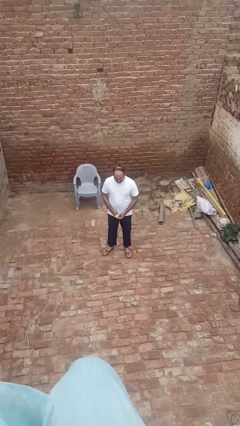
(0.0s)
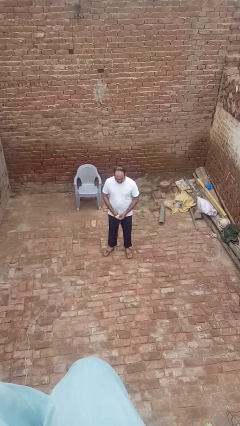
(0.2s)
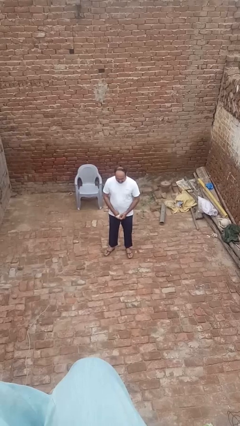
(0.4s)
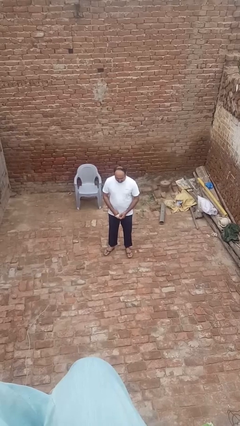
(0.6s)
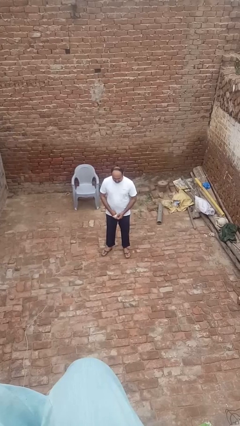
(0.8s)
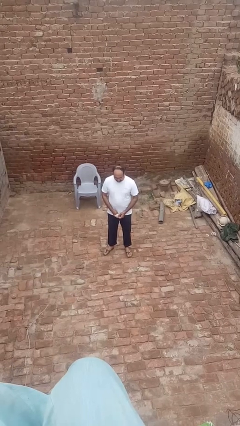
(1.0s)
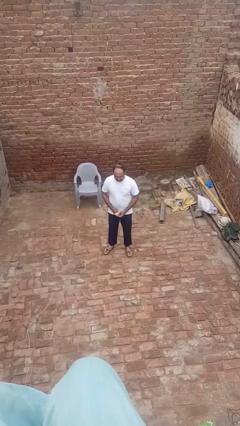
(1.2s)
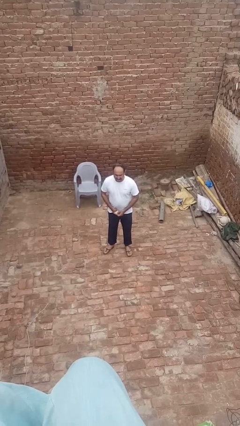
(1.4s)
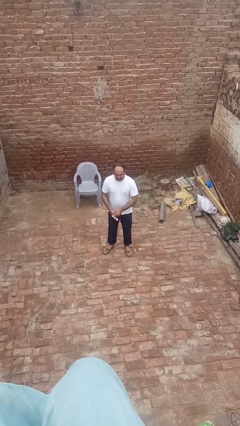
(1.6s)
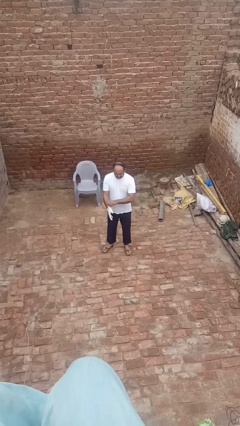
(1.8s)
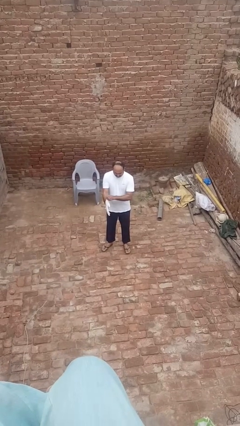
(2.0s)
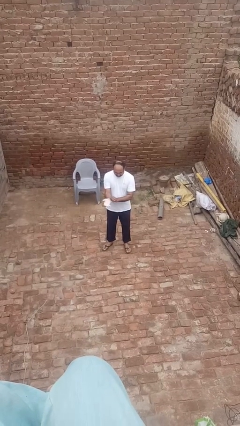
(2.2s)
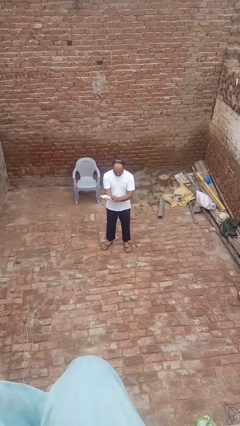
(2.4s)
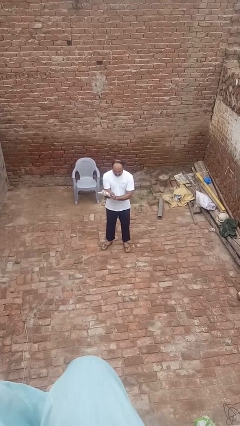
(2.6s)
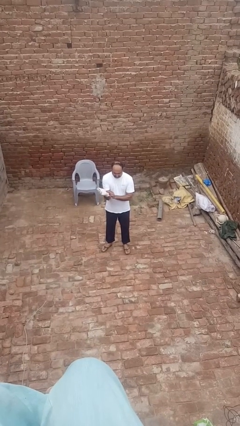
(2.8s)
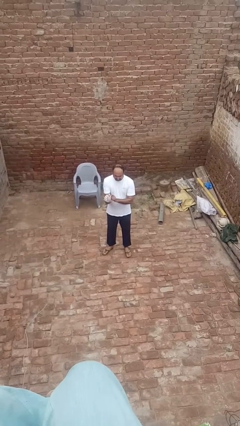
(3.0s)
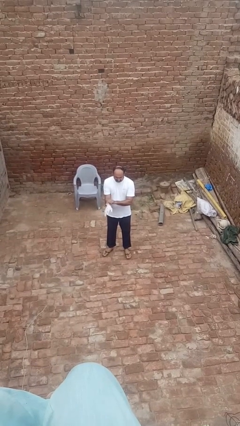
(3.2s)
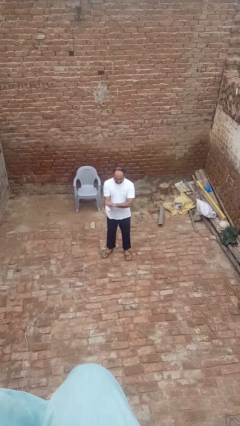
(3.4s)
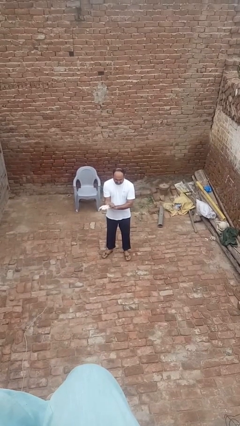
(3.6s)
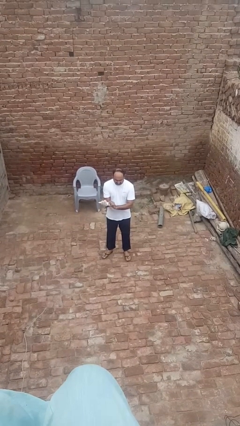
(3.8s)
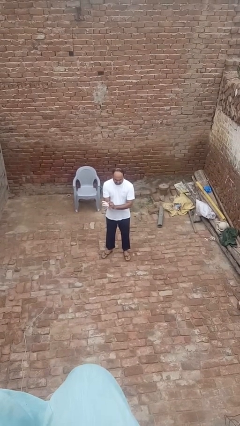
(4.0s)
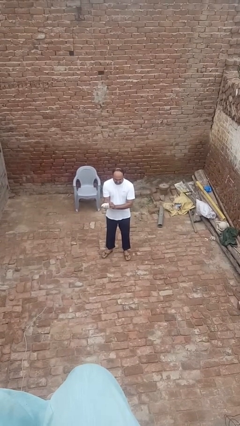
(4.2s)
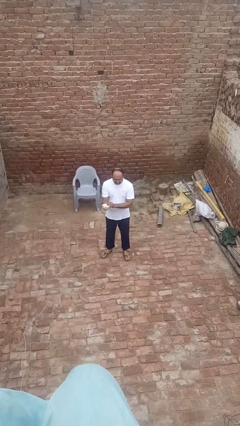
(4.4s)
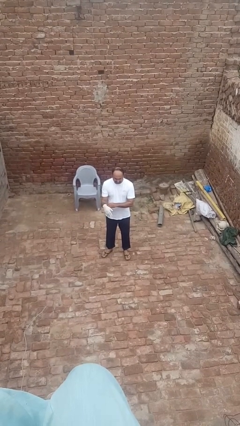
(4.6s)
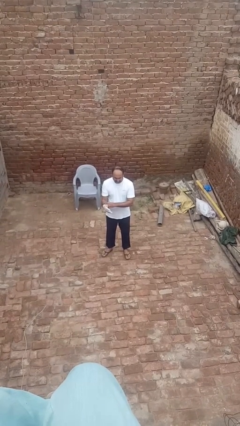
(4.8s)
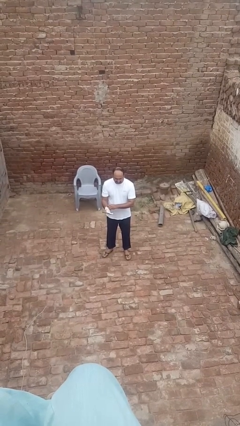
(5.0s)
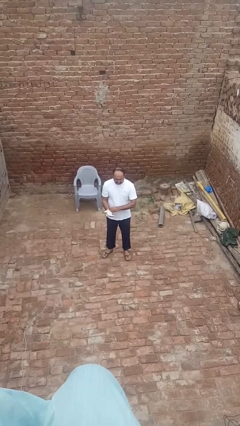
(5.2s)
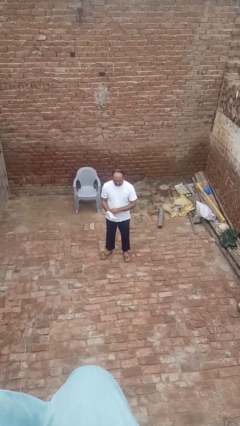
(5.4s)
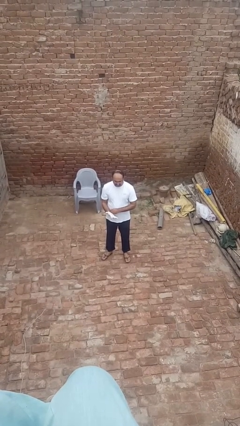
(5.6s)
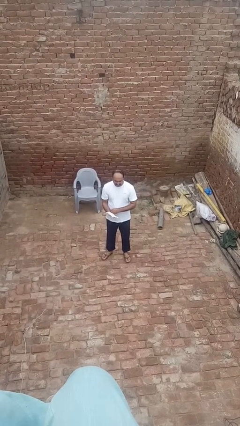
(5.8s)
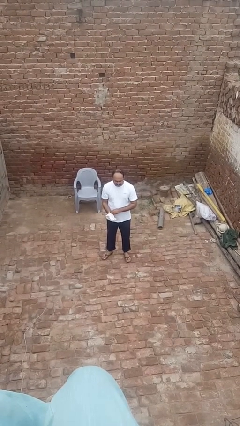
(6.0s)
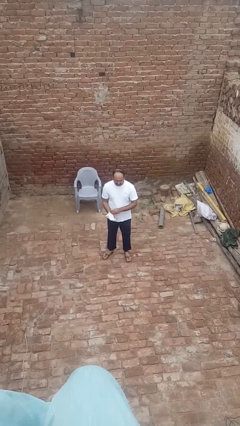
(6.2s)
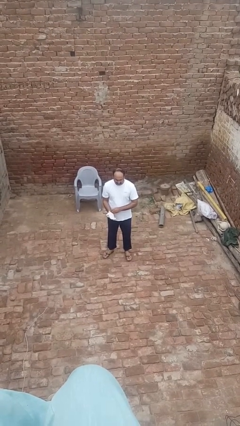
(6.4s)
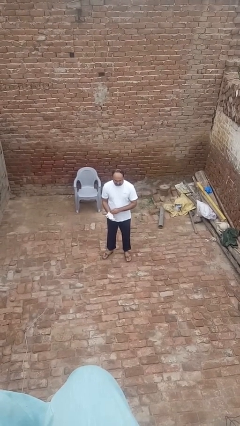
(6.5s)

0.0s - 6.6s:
person puts on gloves

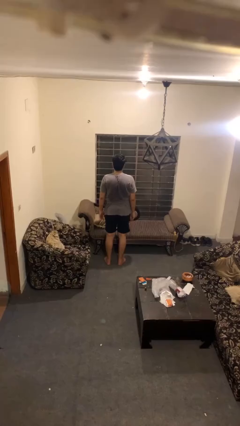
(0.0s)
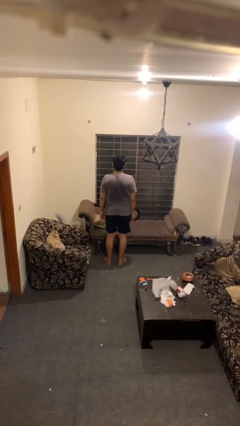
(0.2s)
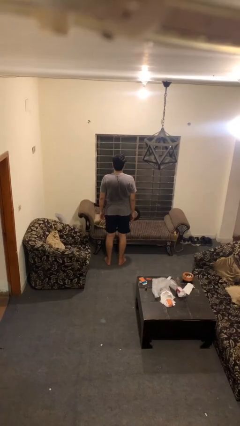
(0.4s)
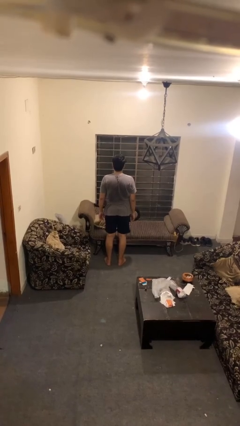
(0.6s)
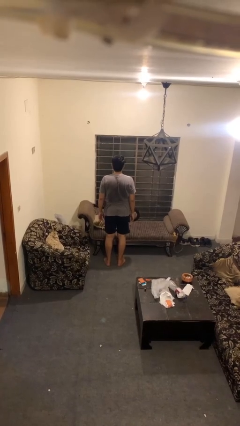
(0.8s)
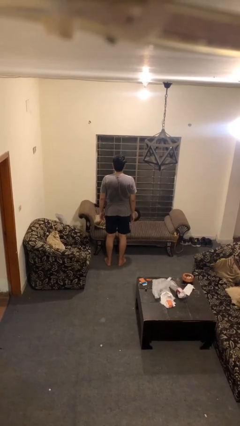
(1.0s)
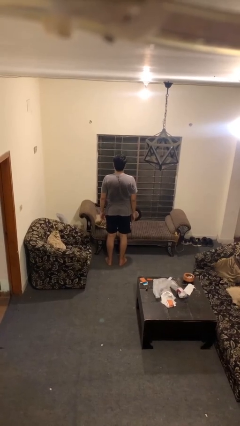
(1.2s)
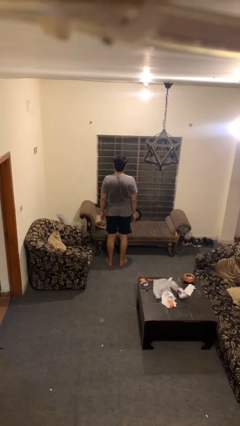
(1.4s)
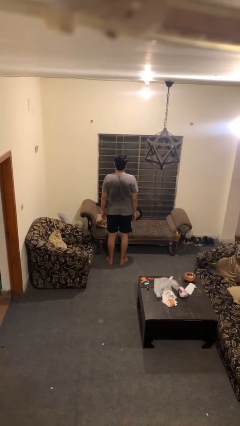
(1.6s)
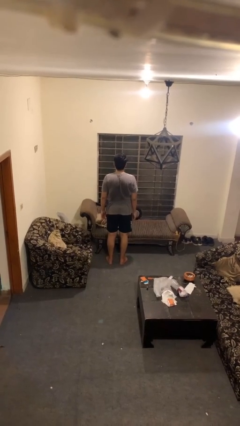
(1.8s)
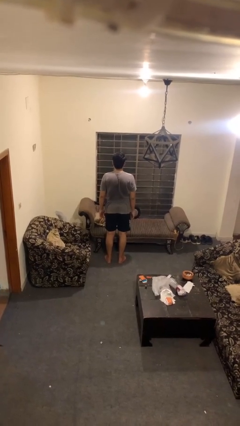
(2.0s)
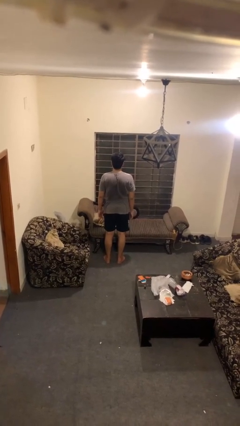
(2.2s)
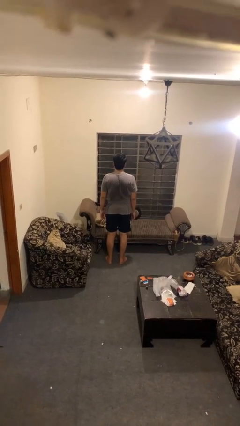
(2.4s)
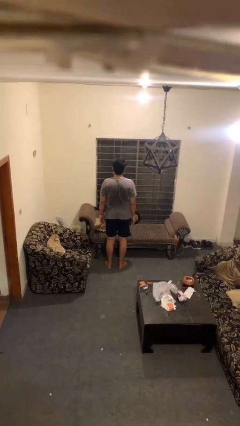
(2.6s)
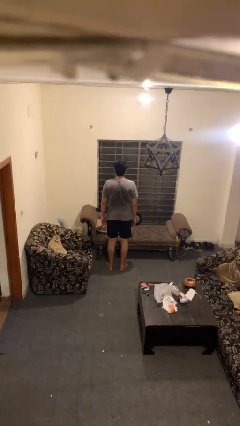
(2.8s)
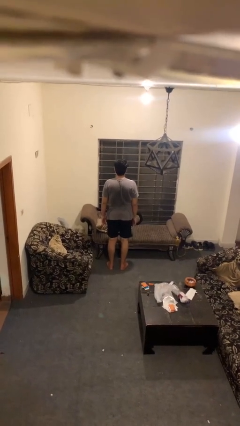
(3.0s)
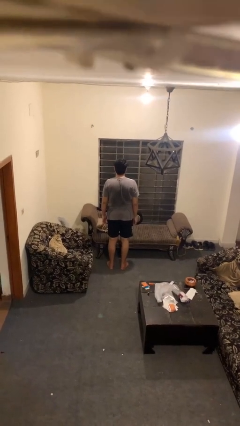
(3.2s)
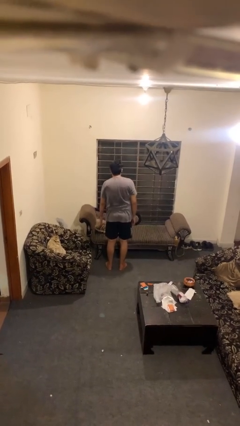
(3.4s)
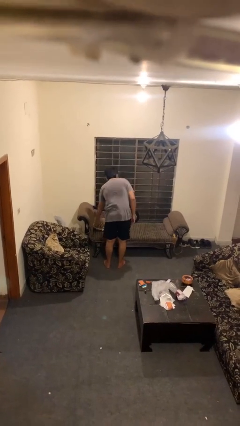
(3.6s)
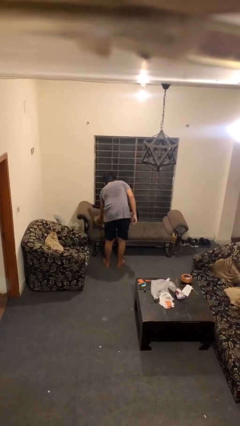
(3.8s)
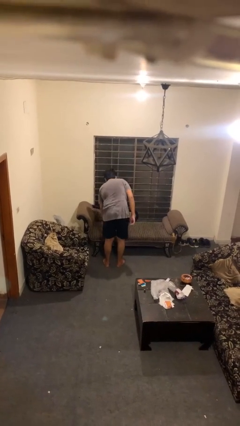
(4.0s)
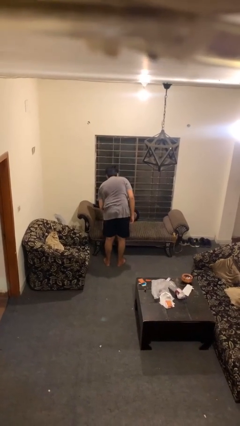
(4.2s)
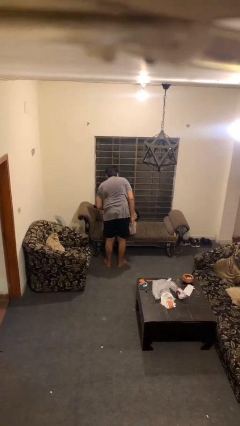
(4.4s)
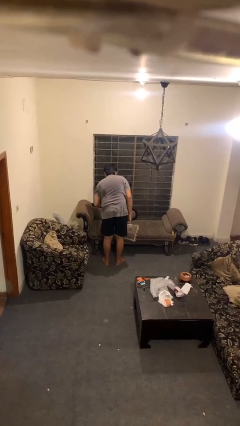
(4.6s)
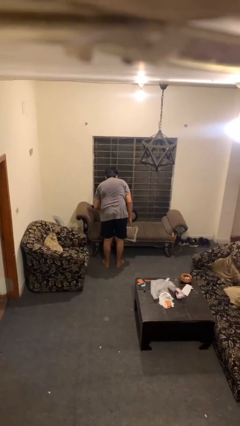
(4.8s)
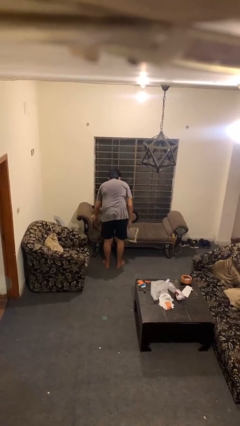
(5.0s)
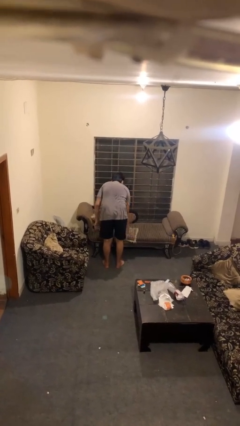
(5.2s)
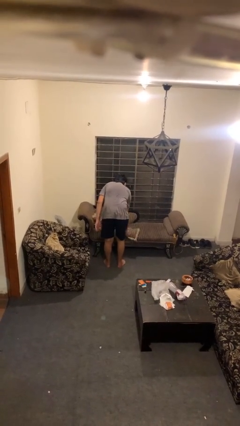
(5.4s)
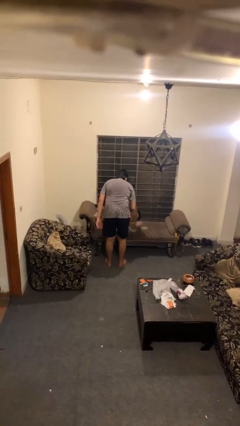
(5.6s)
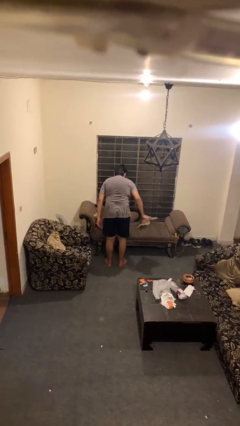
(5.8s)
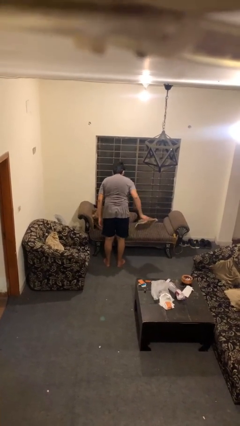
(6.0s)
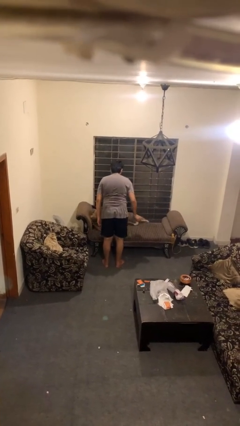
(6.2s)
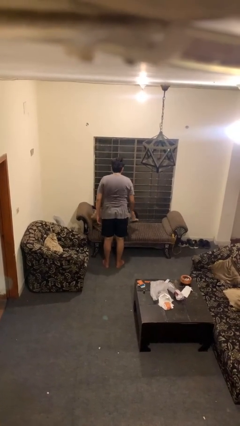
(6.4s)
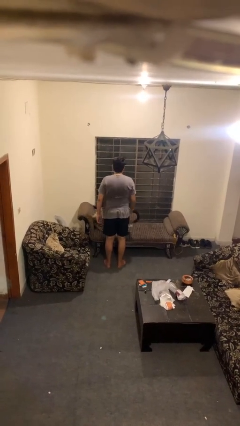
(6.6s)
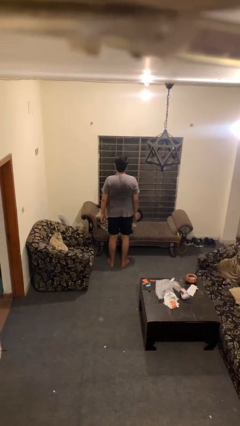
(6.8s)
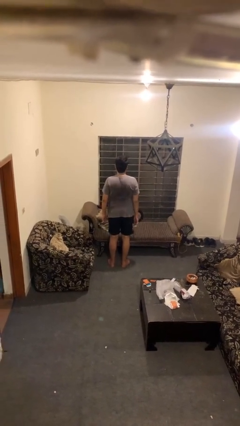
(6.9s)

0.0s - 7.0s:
person searches in couch

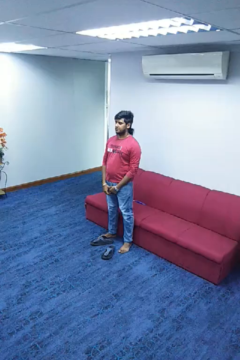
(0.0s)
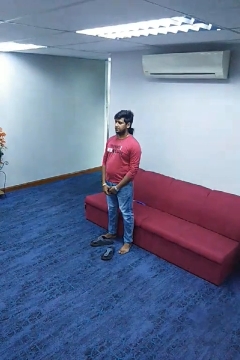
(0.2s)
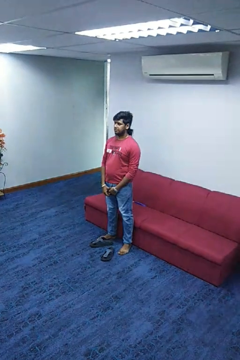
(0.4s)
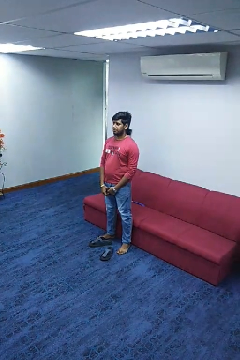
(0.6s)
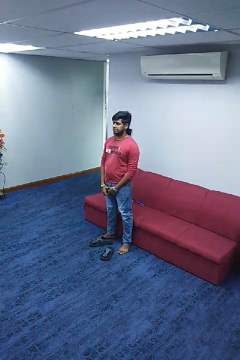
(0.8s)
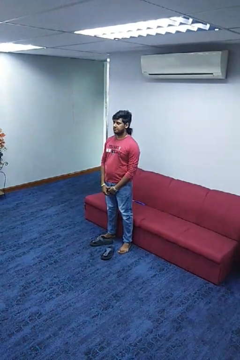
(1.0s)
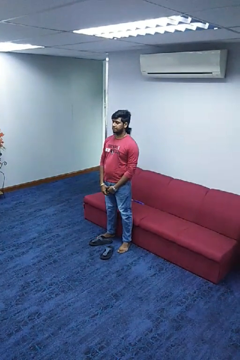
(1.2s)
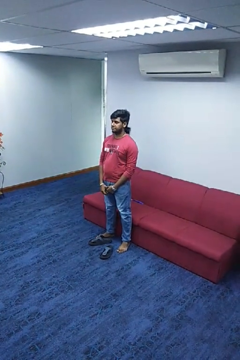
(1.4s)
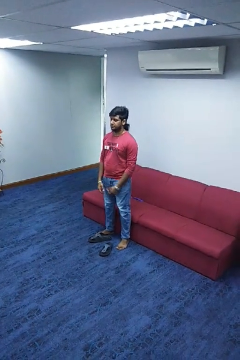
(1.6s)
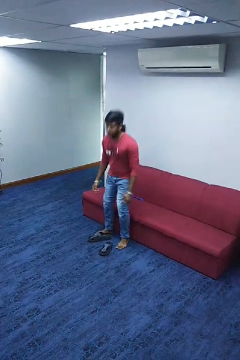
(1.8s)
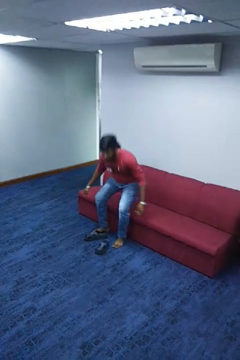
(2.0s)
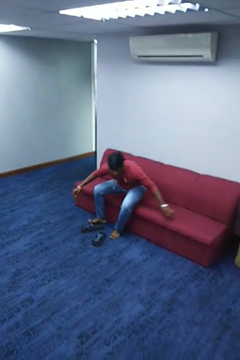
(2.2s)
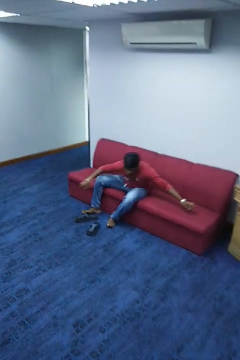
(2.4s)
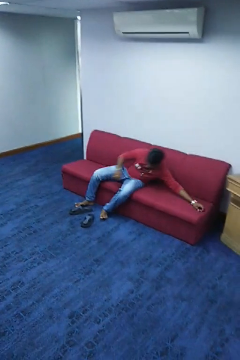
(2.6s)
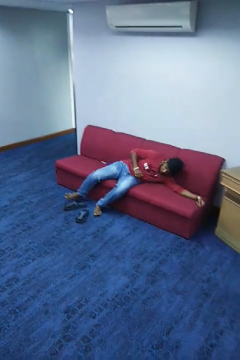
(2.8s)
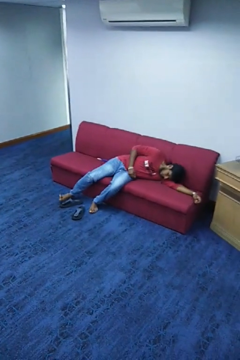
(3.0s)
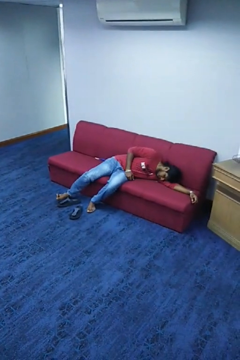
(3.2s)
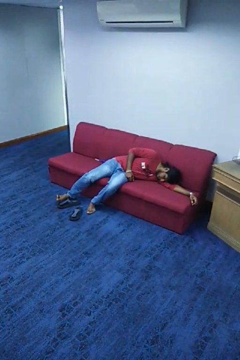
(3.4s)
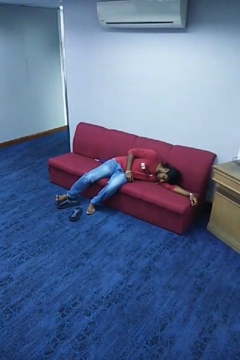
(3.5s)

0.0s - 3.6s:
person lies down on couch

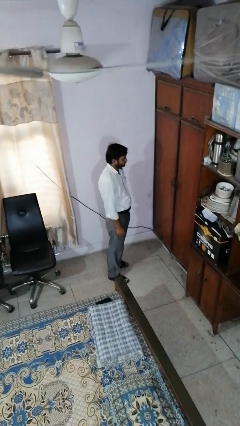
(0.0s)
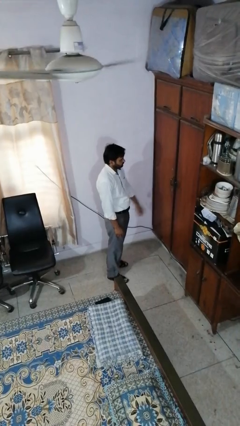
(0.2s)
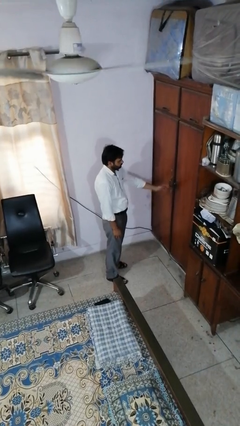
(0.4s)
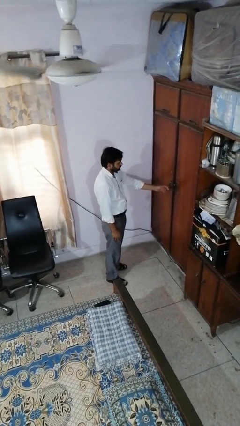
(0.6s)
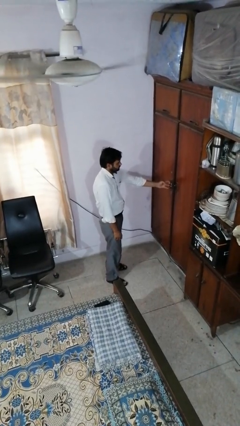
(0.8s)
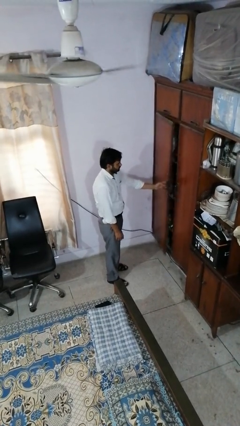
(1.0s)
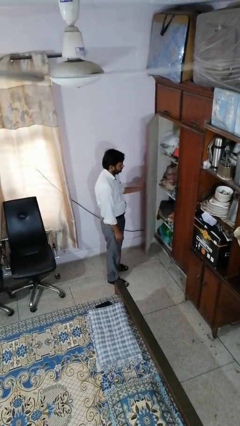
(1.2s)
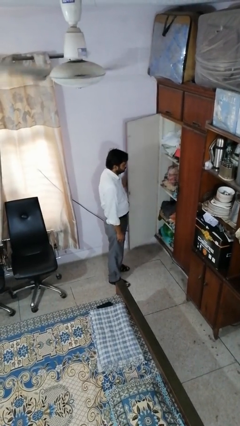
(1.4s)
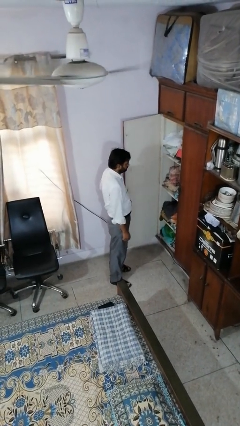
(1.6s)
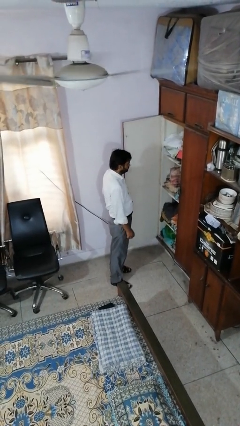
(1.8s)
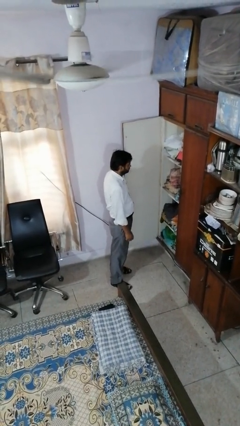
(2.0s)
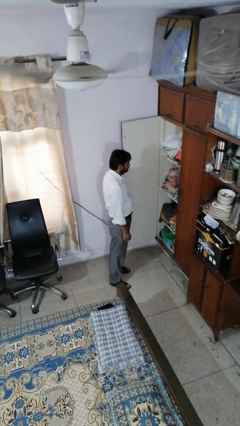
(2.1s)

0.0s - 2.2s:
person opens closet door
